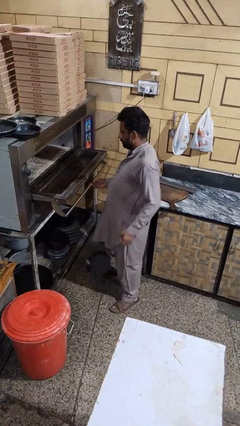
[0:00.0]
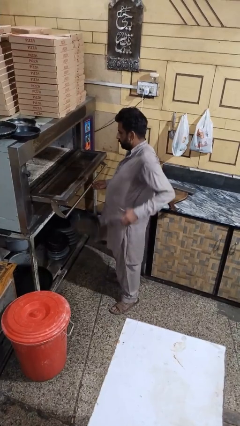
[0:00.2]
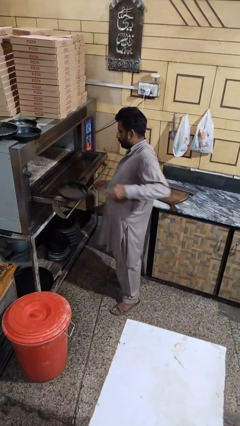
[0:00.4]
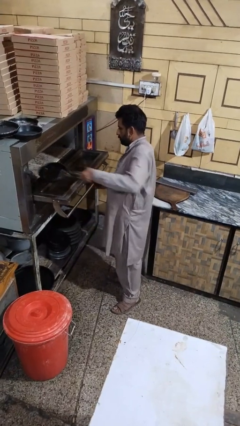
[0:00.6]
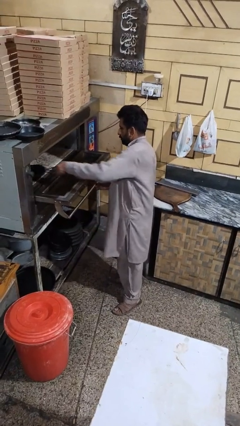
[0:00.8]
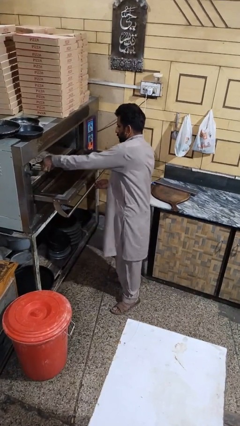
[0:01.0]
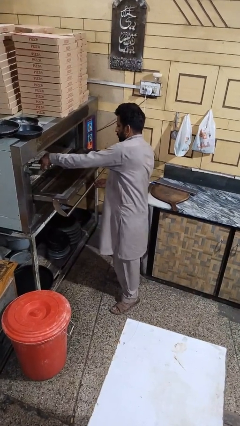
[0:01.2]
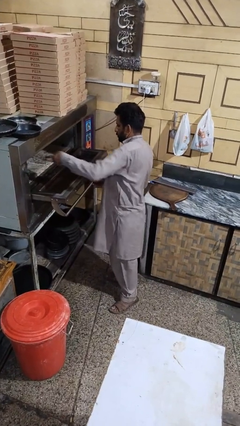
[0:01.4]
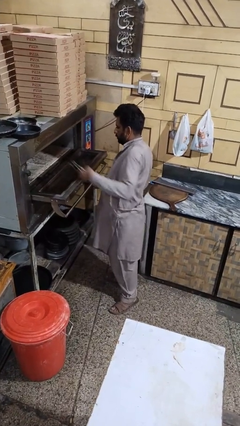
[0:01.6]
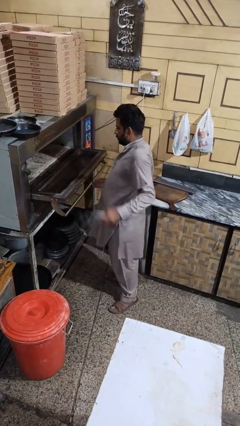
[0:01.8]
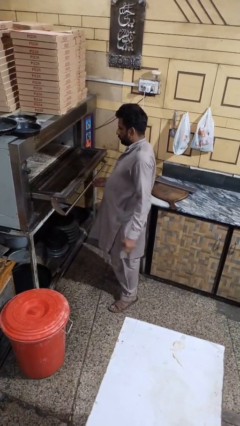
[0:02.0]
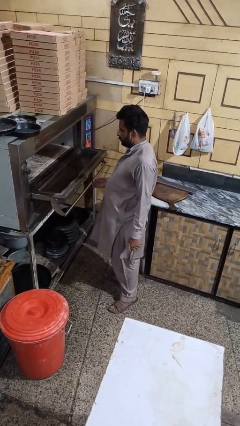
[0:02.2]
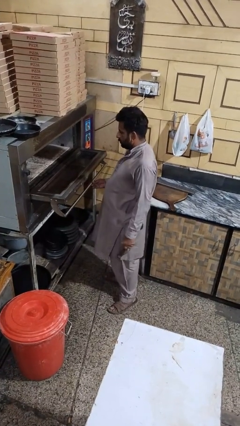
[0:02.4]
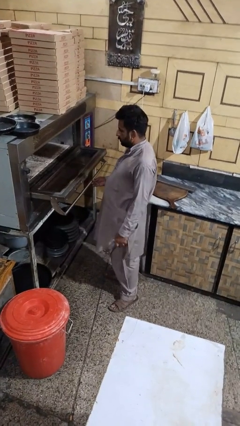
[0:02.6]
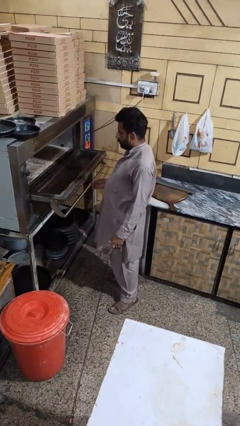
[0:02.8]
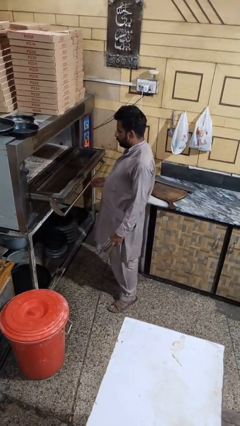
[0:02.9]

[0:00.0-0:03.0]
person puts object into microwave

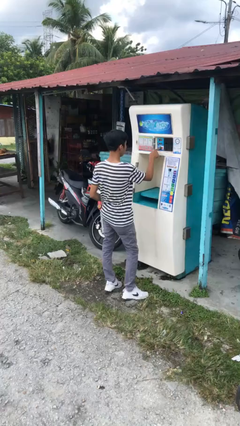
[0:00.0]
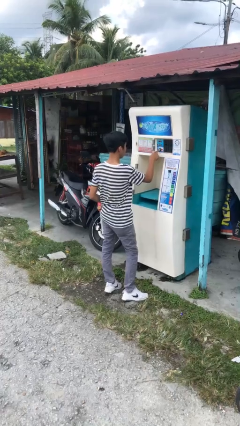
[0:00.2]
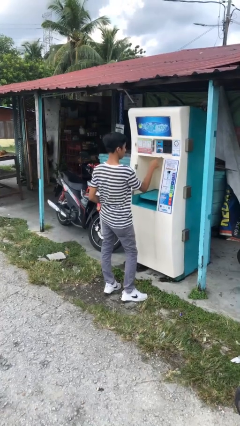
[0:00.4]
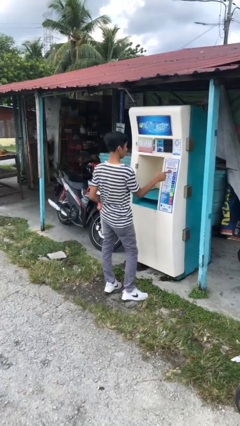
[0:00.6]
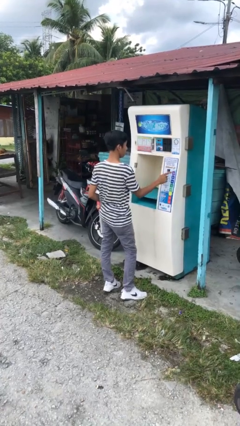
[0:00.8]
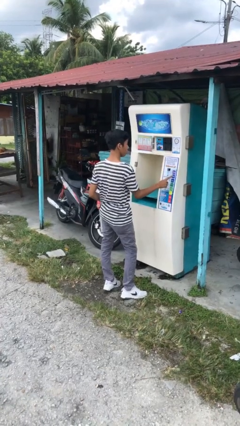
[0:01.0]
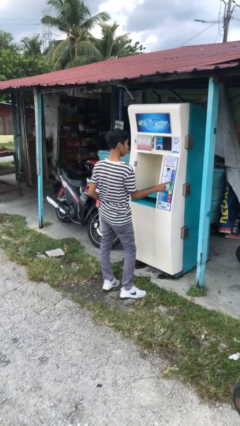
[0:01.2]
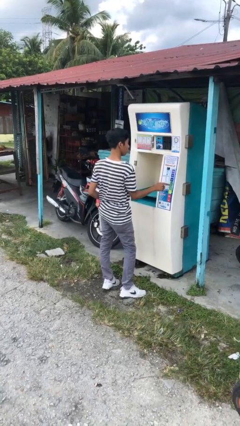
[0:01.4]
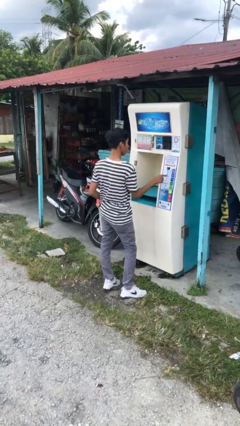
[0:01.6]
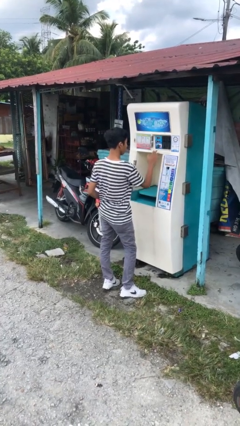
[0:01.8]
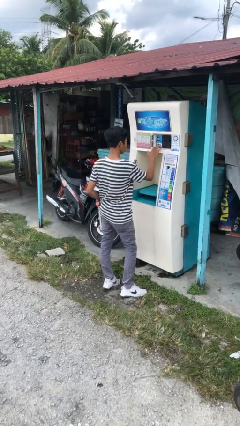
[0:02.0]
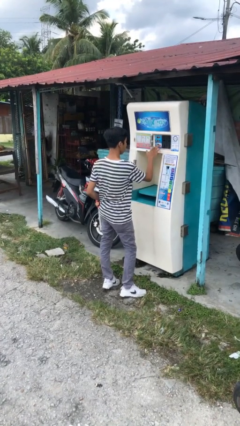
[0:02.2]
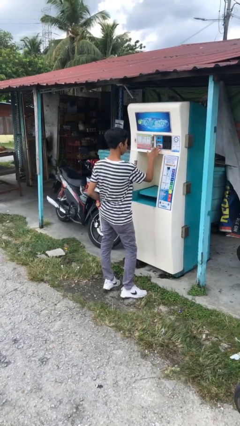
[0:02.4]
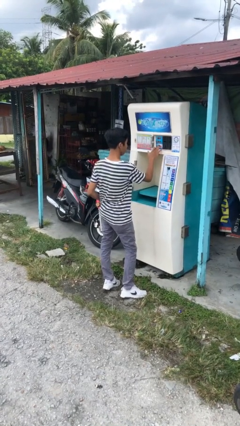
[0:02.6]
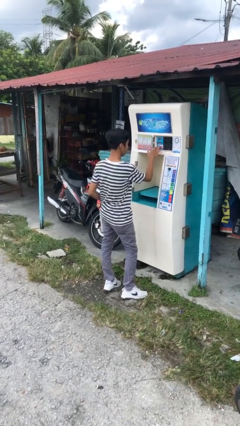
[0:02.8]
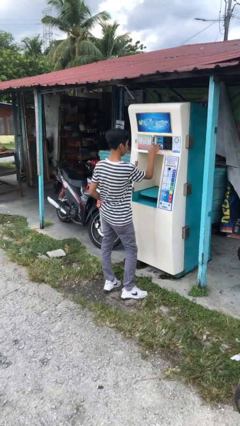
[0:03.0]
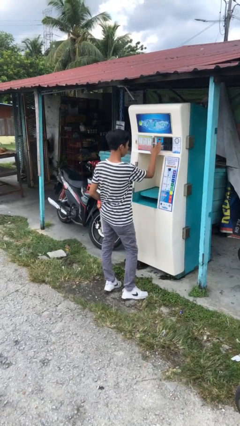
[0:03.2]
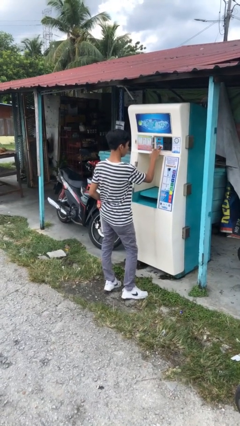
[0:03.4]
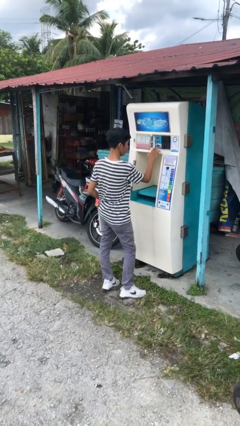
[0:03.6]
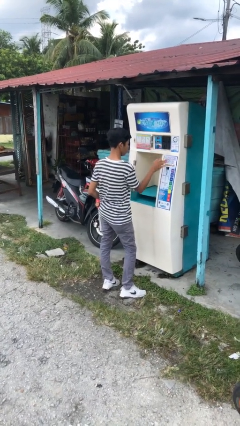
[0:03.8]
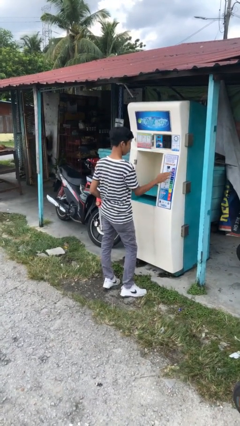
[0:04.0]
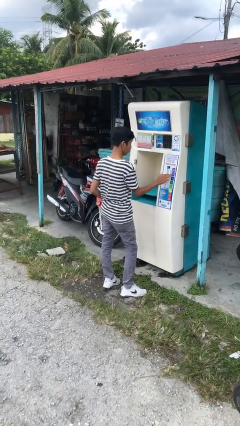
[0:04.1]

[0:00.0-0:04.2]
person purchases from machine

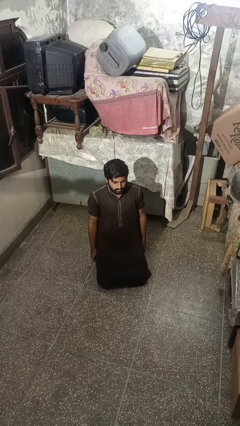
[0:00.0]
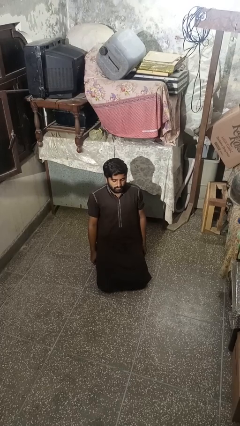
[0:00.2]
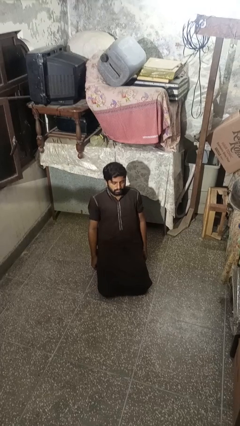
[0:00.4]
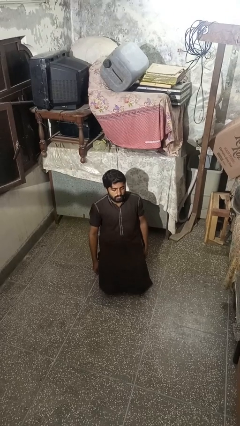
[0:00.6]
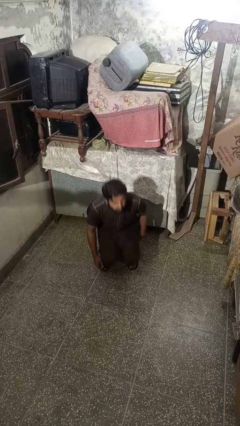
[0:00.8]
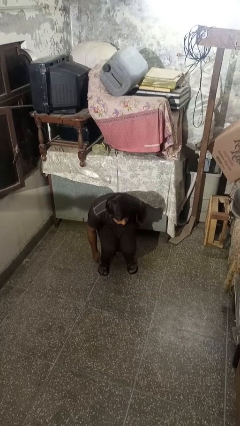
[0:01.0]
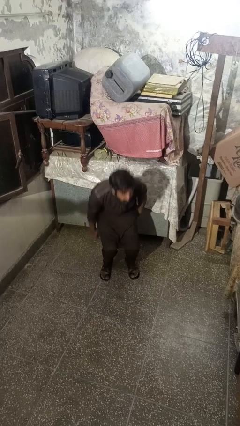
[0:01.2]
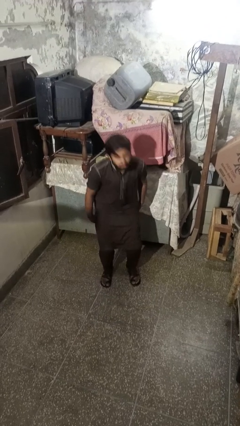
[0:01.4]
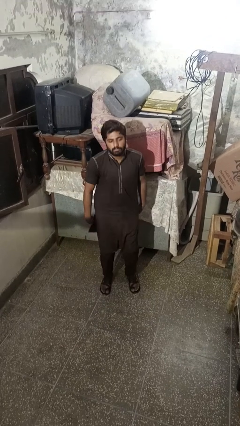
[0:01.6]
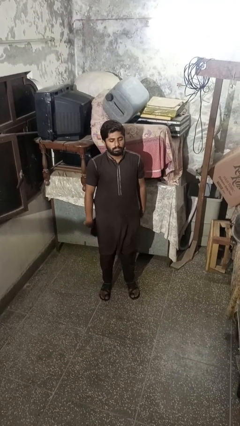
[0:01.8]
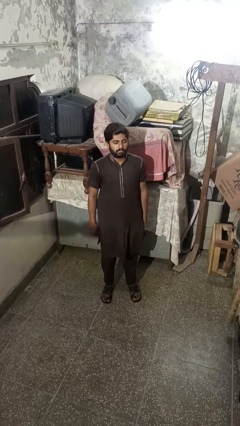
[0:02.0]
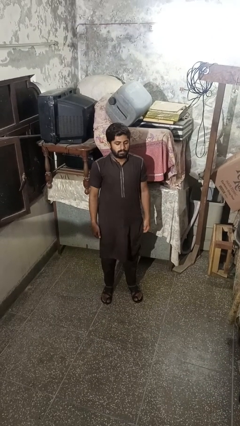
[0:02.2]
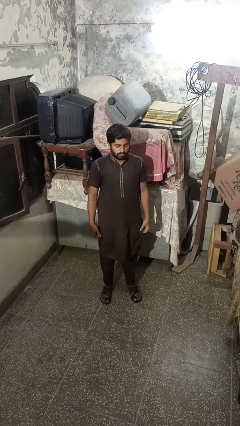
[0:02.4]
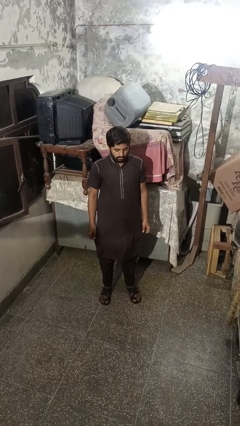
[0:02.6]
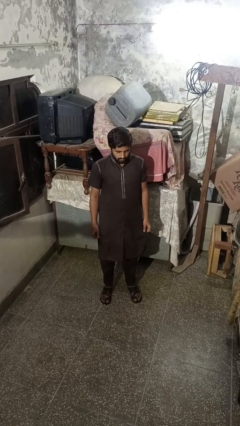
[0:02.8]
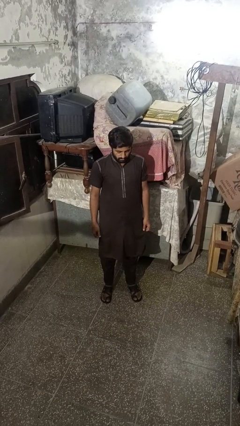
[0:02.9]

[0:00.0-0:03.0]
person stands up from floor

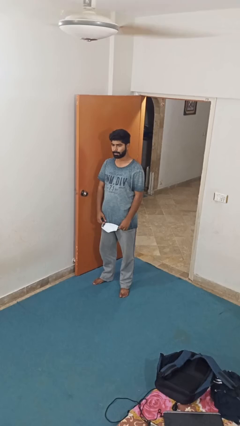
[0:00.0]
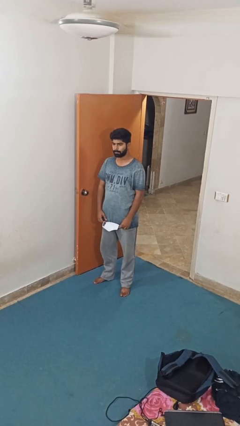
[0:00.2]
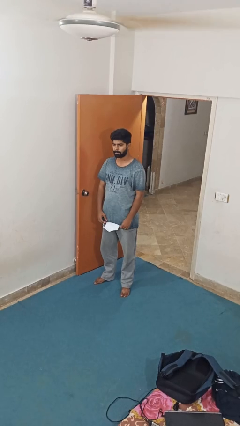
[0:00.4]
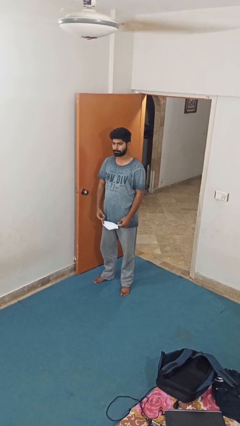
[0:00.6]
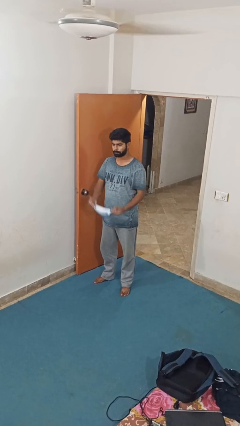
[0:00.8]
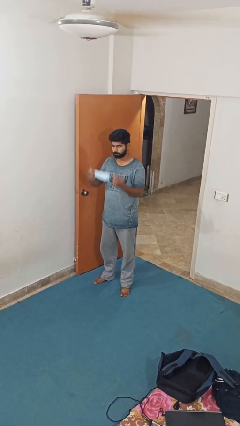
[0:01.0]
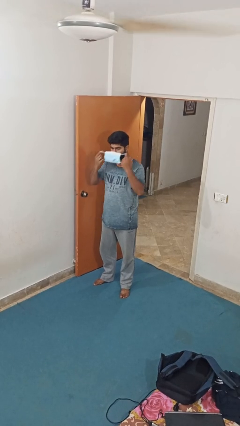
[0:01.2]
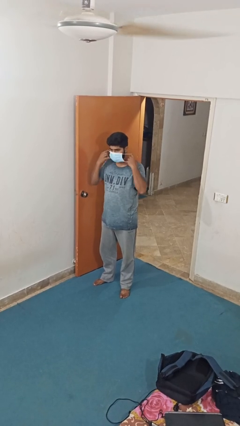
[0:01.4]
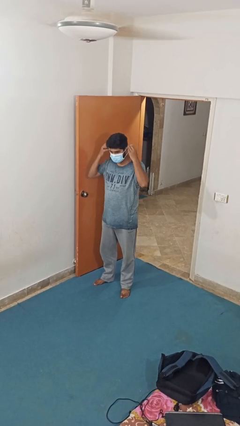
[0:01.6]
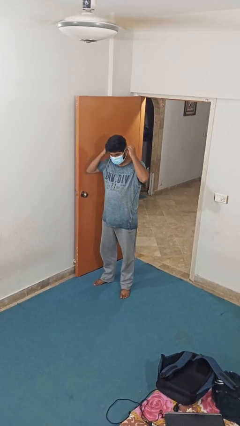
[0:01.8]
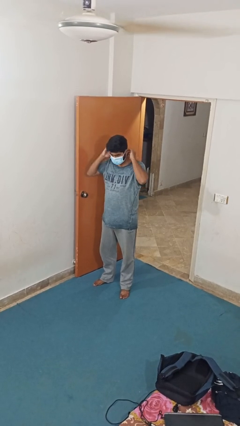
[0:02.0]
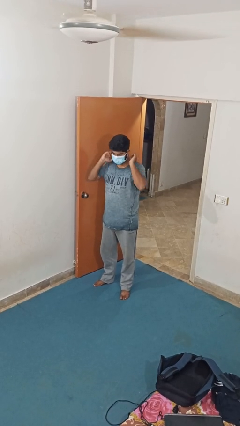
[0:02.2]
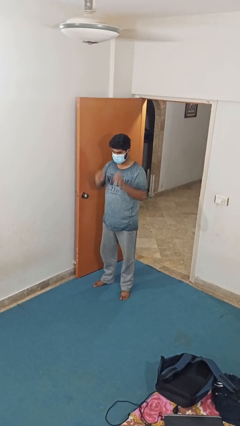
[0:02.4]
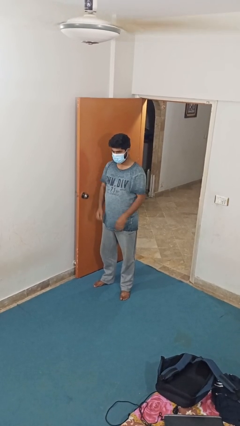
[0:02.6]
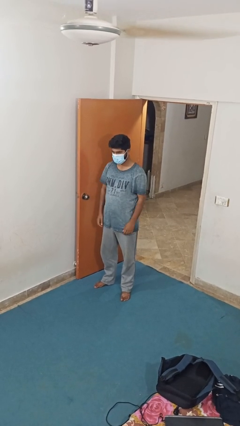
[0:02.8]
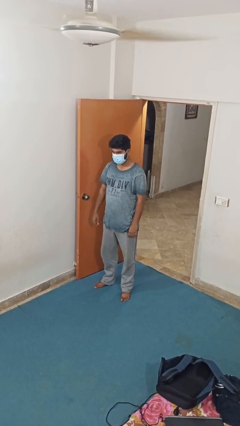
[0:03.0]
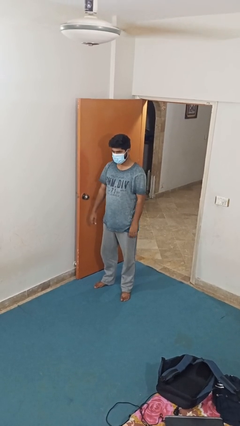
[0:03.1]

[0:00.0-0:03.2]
person puts on facemask

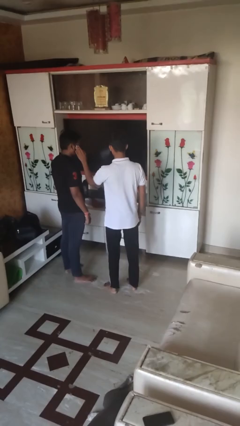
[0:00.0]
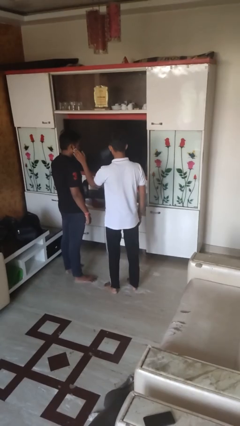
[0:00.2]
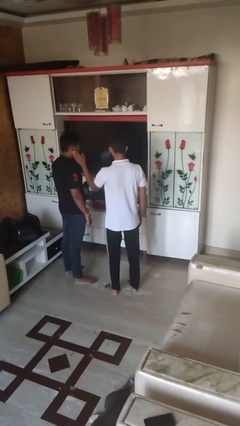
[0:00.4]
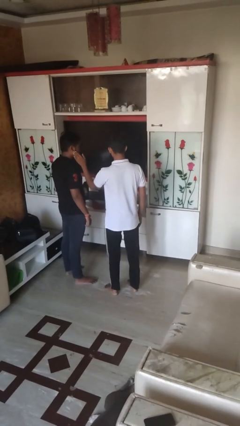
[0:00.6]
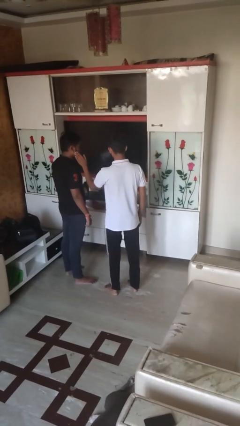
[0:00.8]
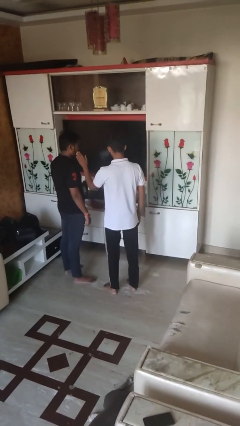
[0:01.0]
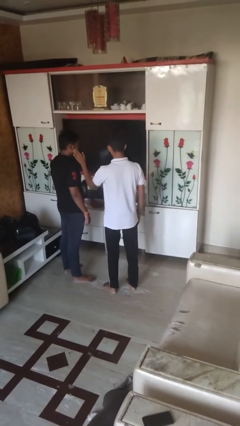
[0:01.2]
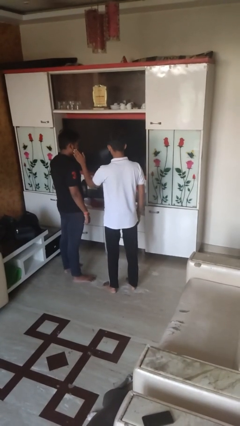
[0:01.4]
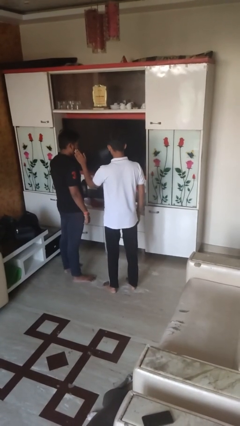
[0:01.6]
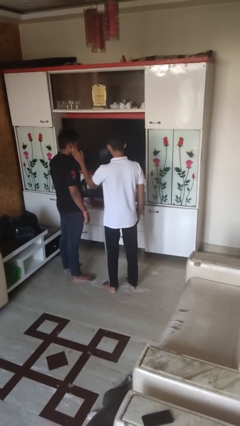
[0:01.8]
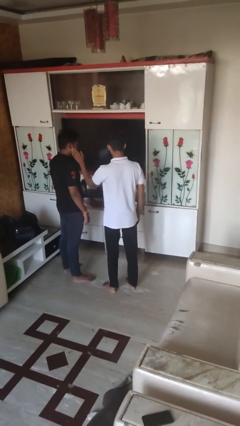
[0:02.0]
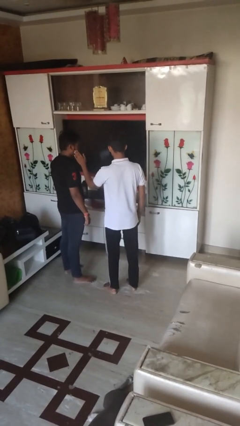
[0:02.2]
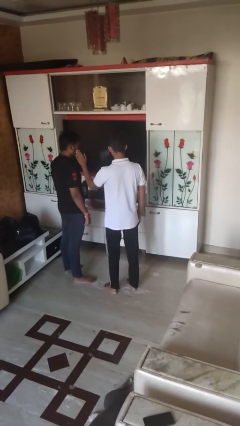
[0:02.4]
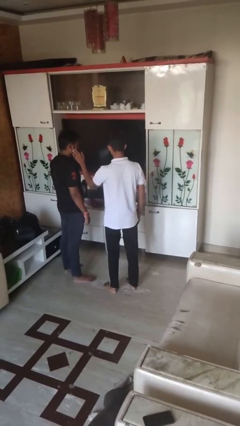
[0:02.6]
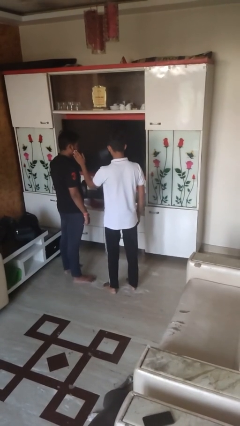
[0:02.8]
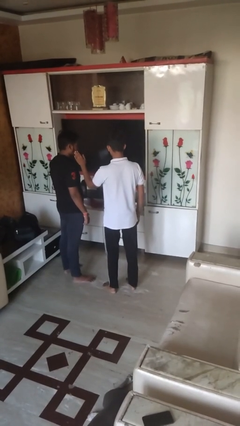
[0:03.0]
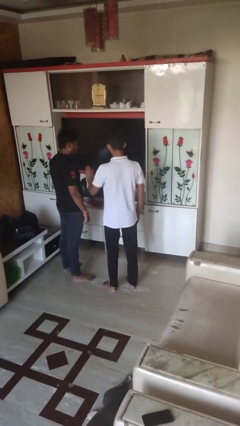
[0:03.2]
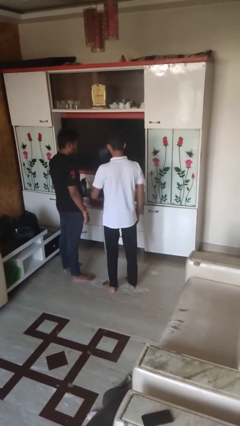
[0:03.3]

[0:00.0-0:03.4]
person touches face of person

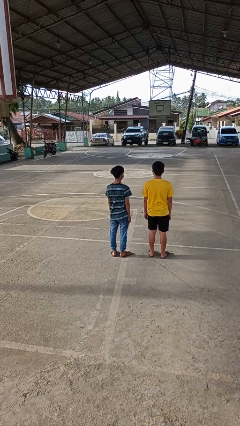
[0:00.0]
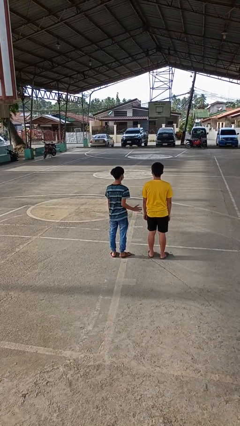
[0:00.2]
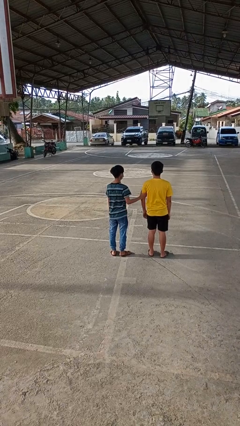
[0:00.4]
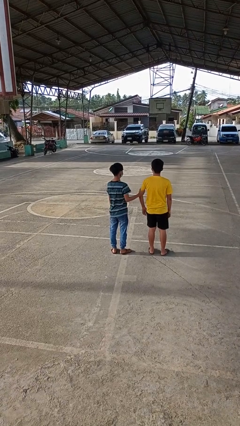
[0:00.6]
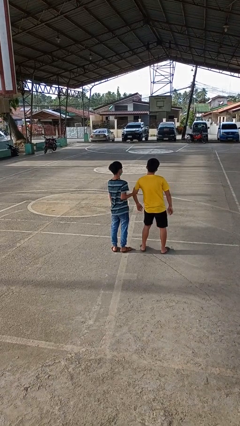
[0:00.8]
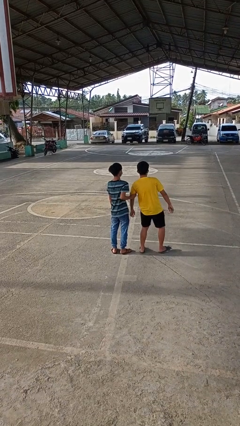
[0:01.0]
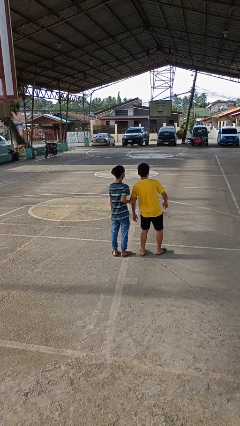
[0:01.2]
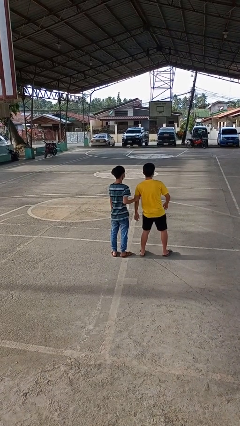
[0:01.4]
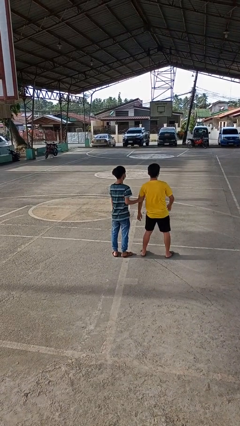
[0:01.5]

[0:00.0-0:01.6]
person grabs person by bicep
